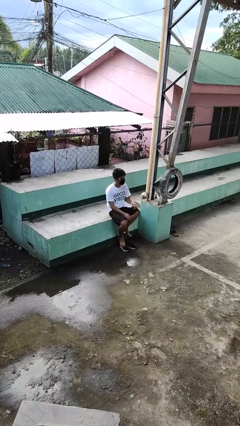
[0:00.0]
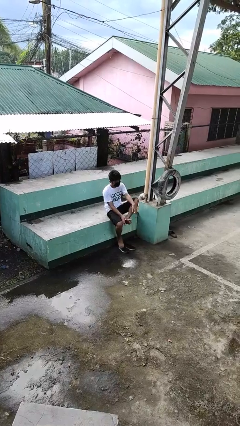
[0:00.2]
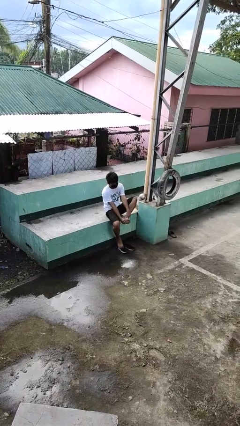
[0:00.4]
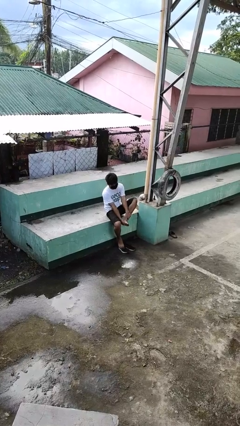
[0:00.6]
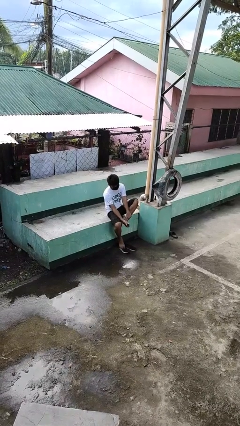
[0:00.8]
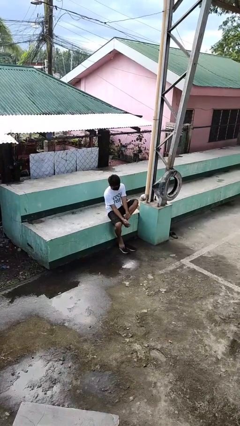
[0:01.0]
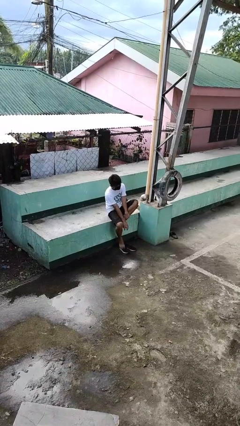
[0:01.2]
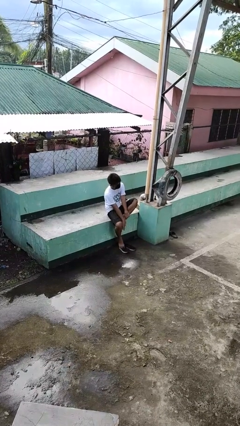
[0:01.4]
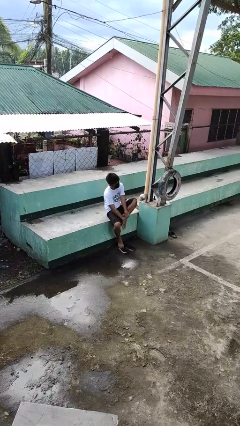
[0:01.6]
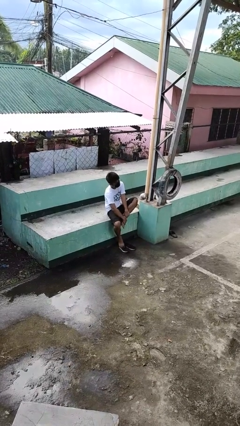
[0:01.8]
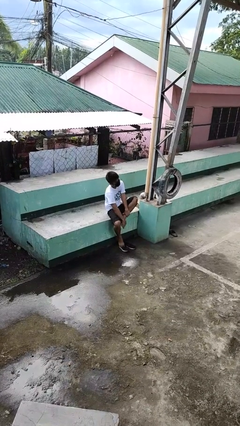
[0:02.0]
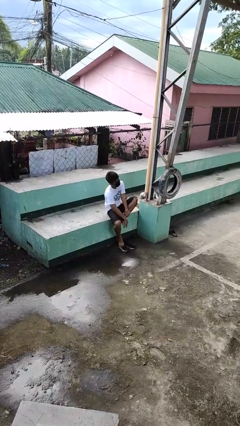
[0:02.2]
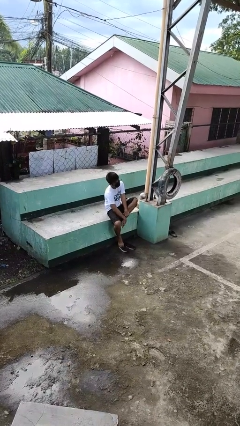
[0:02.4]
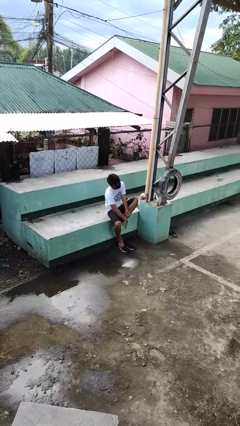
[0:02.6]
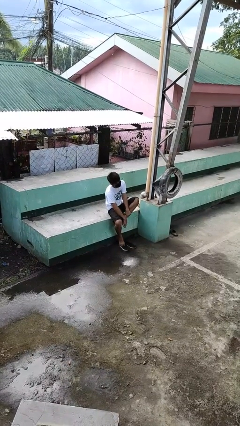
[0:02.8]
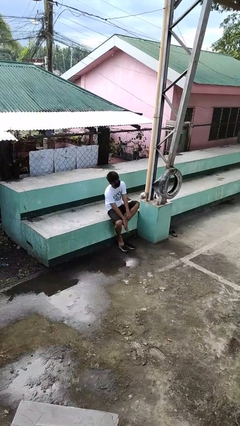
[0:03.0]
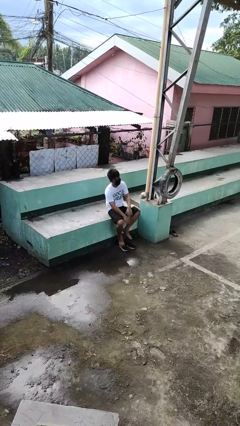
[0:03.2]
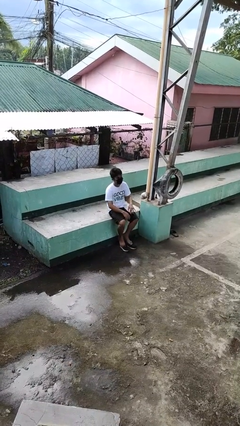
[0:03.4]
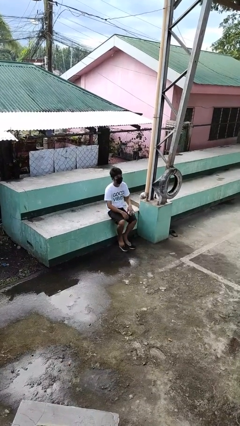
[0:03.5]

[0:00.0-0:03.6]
person rubs foot

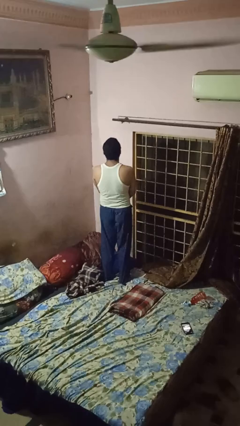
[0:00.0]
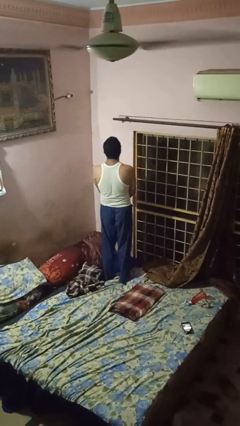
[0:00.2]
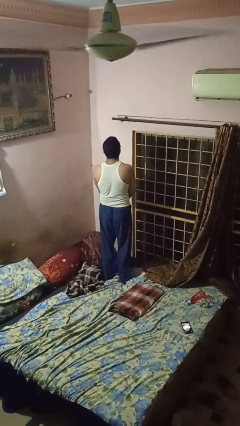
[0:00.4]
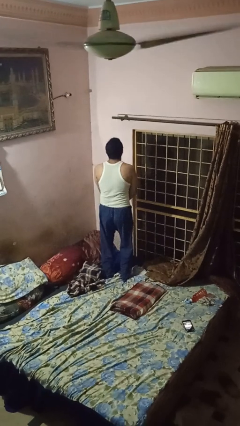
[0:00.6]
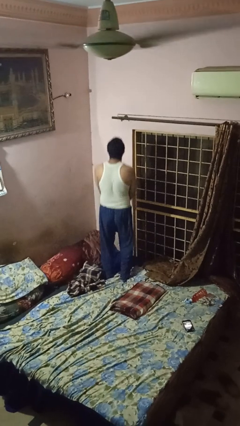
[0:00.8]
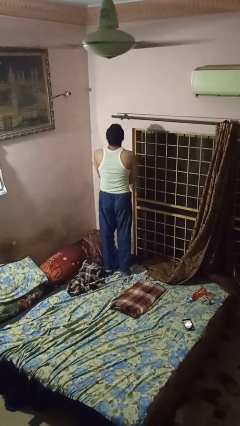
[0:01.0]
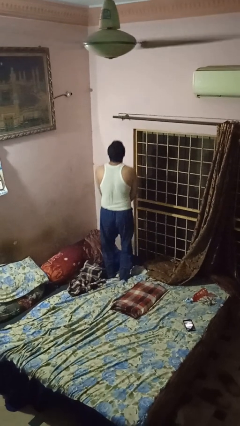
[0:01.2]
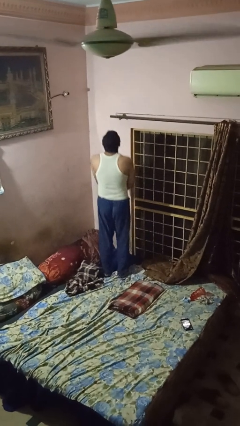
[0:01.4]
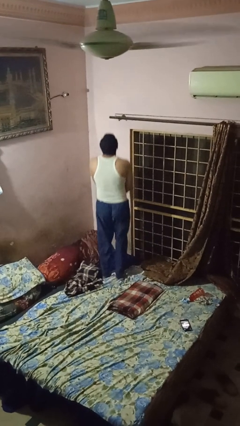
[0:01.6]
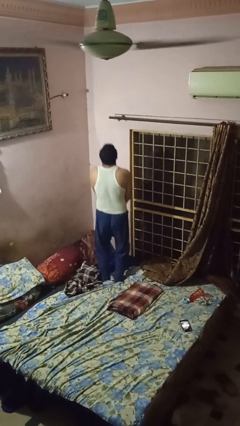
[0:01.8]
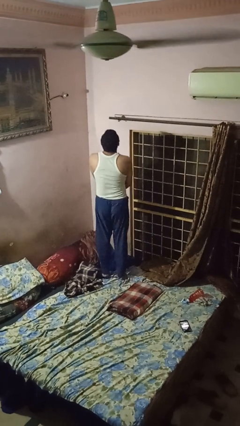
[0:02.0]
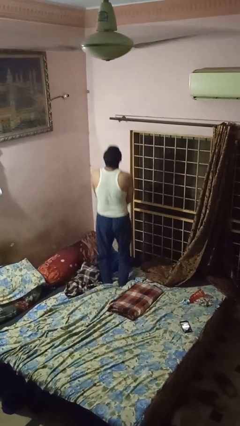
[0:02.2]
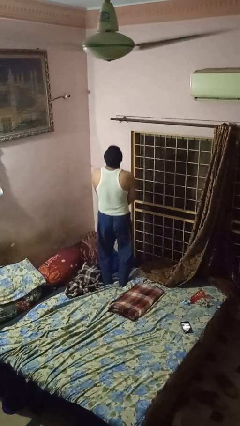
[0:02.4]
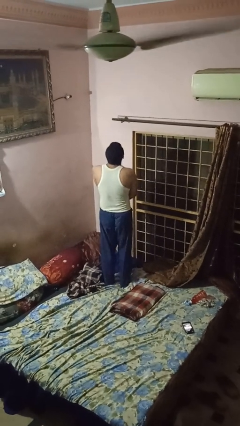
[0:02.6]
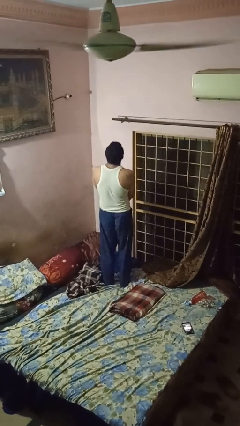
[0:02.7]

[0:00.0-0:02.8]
person jumps on bed

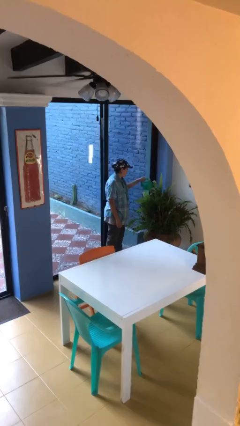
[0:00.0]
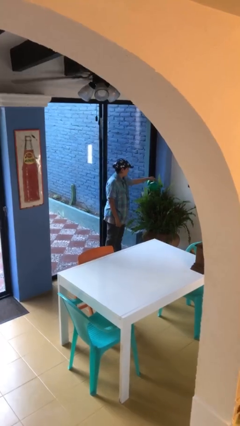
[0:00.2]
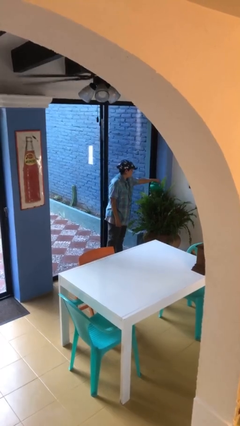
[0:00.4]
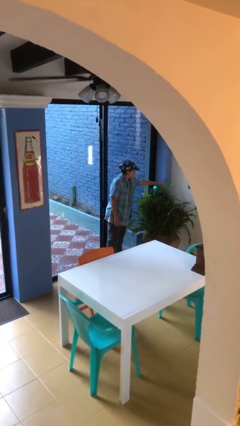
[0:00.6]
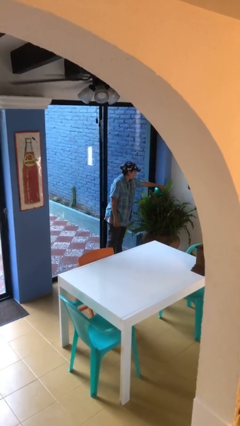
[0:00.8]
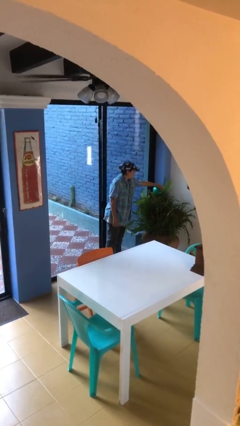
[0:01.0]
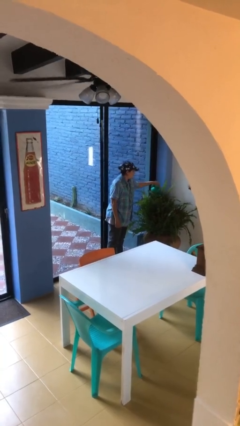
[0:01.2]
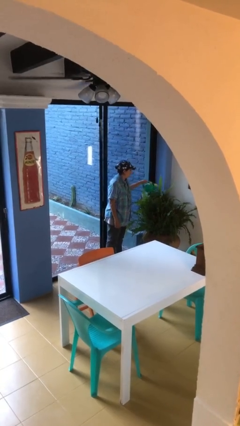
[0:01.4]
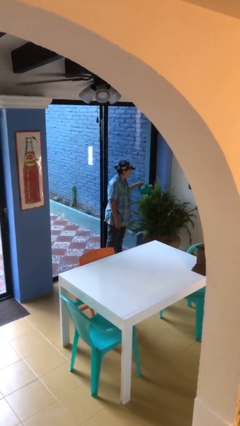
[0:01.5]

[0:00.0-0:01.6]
person waters houseplant

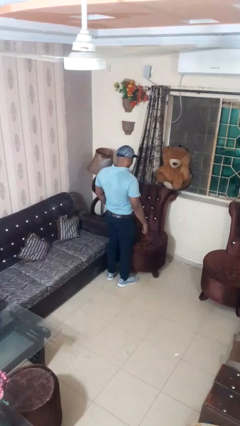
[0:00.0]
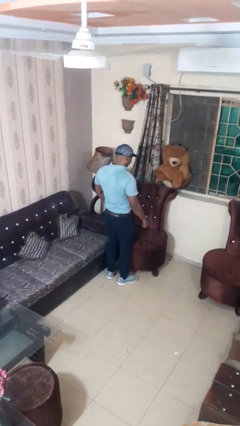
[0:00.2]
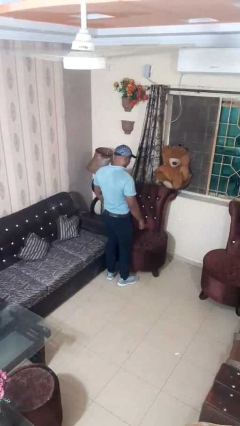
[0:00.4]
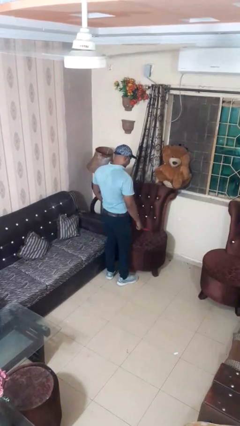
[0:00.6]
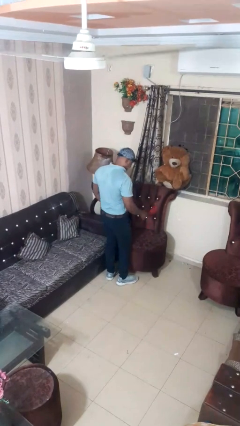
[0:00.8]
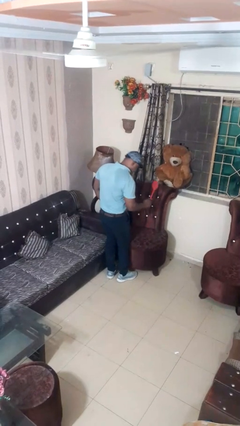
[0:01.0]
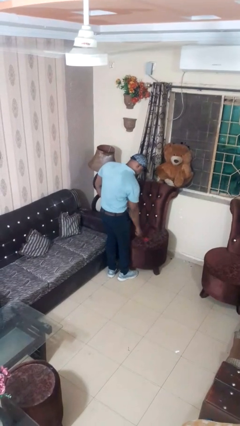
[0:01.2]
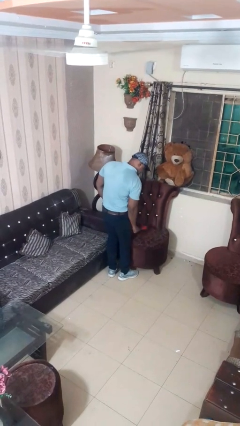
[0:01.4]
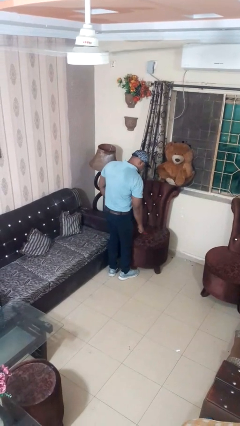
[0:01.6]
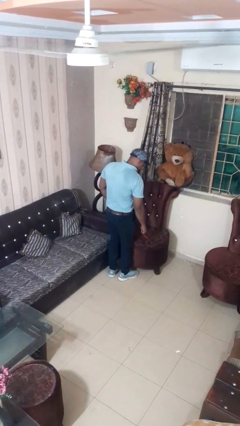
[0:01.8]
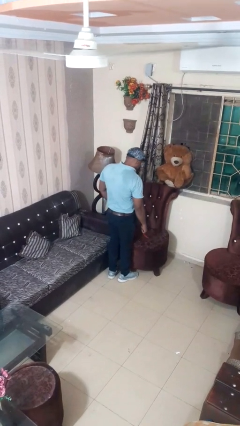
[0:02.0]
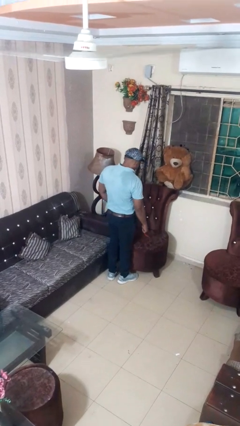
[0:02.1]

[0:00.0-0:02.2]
person swats bug

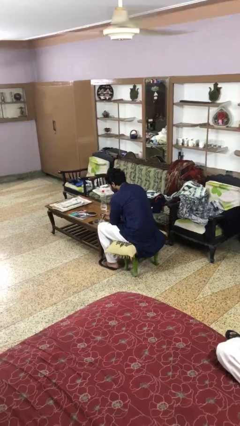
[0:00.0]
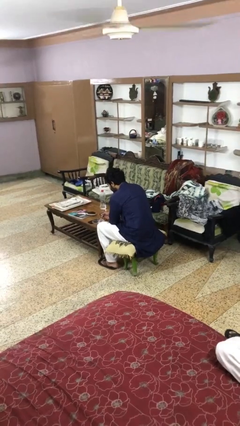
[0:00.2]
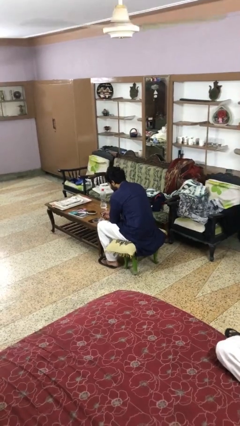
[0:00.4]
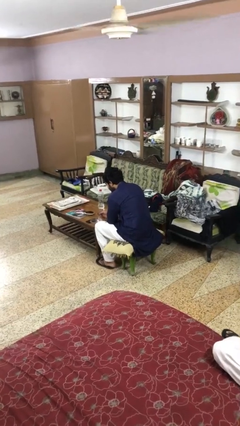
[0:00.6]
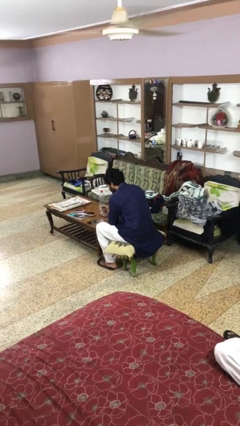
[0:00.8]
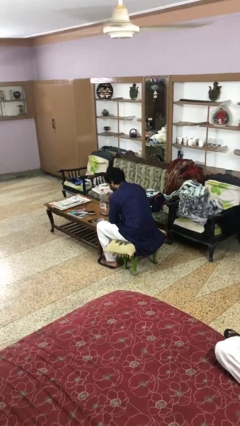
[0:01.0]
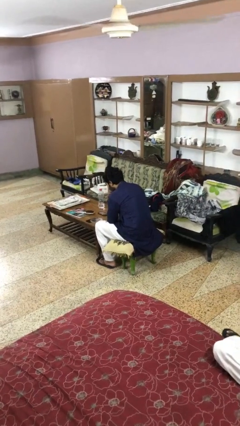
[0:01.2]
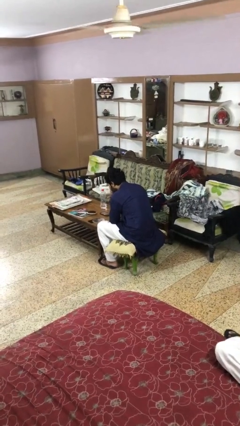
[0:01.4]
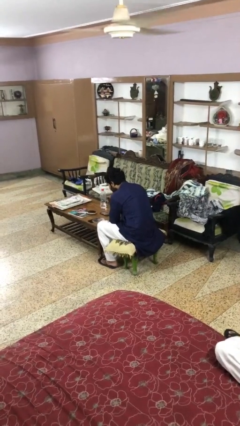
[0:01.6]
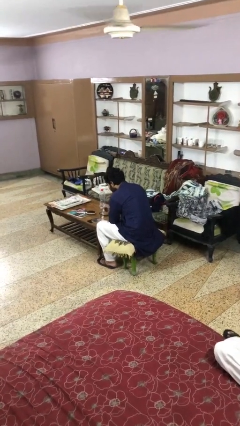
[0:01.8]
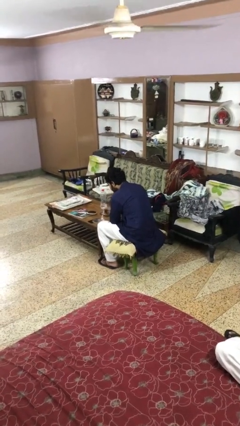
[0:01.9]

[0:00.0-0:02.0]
person eats with utensil

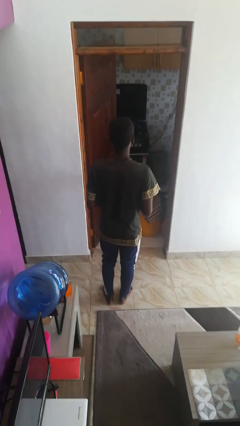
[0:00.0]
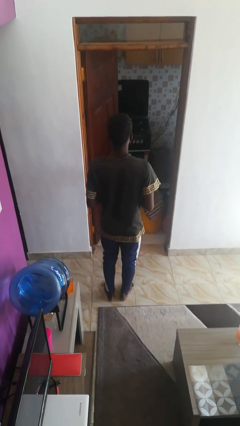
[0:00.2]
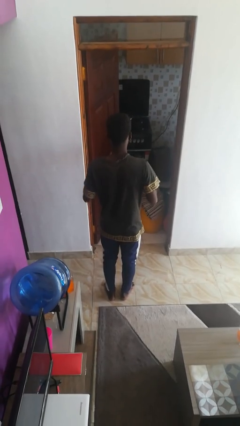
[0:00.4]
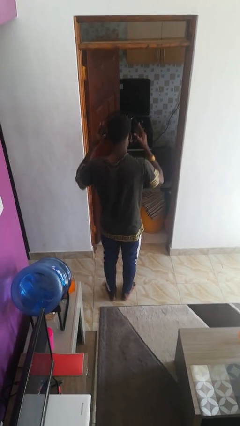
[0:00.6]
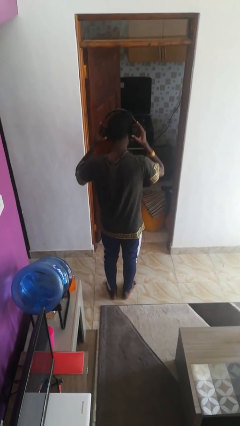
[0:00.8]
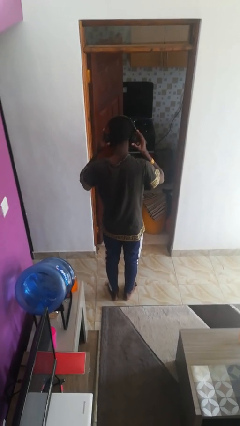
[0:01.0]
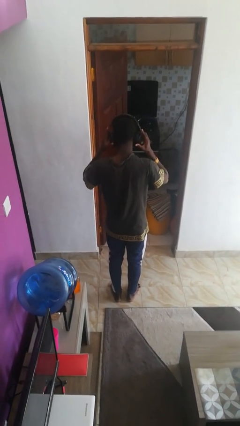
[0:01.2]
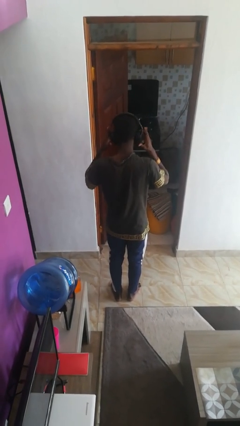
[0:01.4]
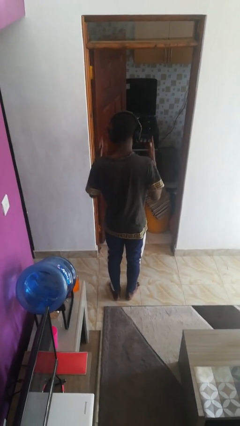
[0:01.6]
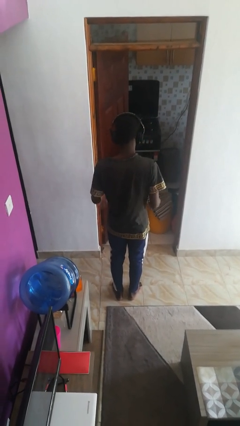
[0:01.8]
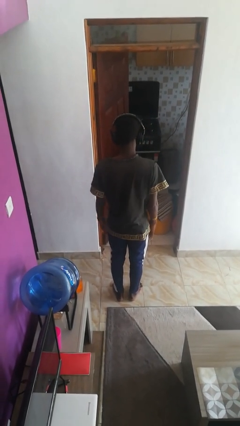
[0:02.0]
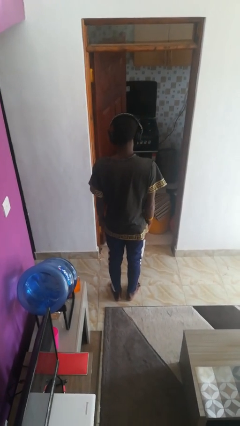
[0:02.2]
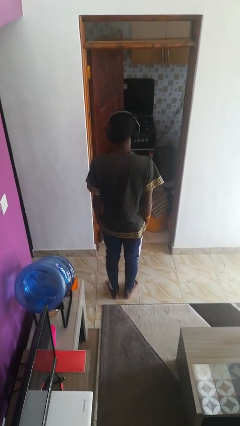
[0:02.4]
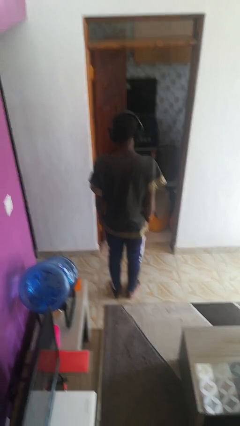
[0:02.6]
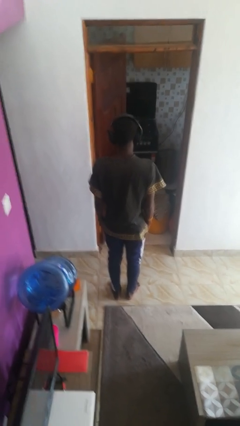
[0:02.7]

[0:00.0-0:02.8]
person puts on headphones

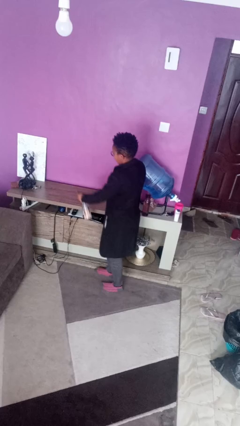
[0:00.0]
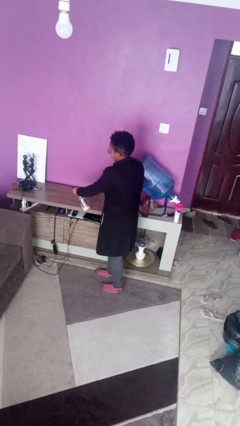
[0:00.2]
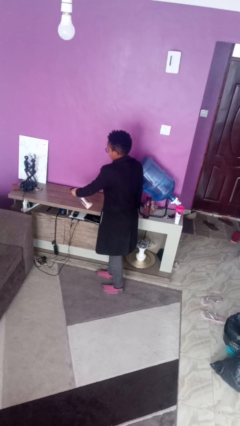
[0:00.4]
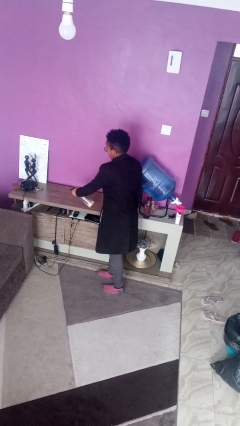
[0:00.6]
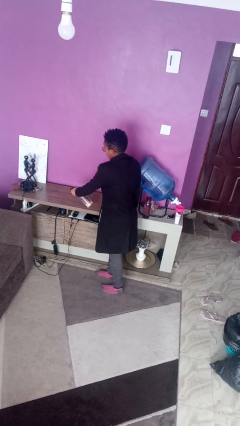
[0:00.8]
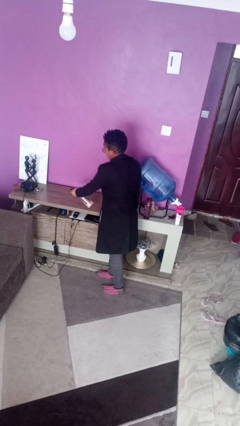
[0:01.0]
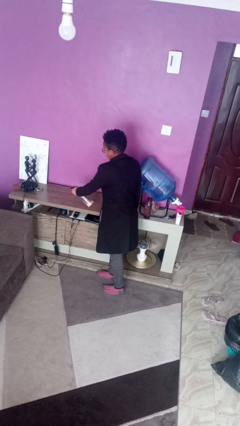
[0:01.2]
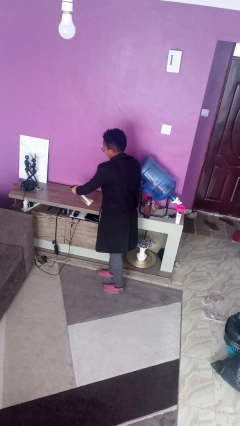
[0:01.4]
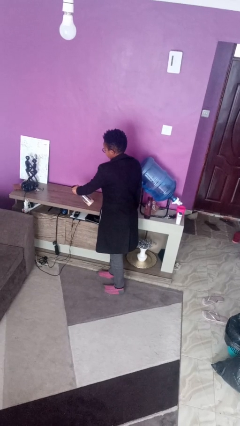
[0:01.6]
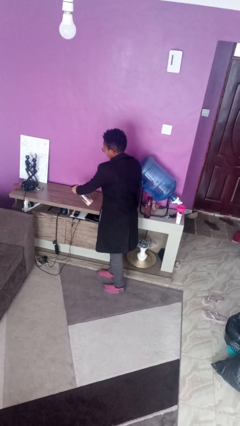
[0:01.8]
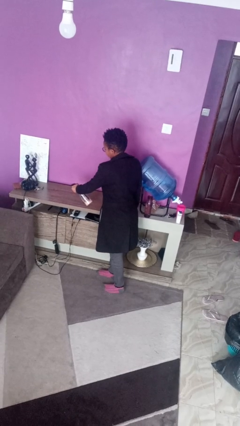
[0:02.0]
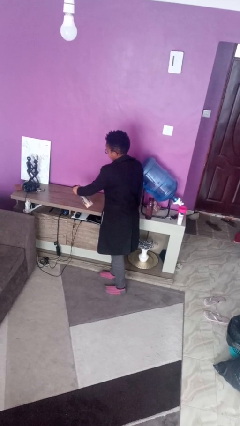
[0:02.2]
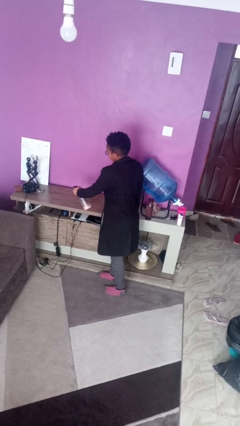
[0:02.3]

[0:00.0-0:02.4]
person sprays from bottle
